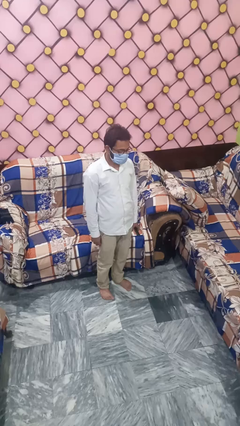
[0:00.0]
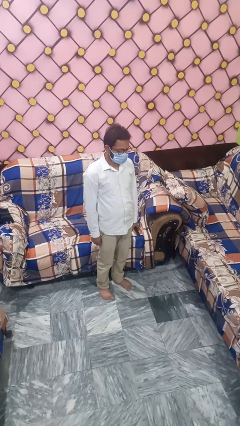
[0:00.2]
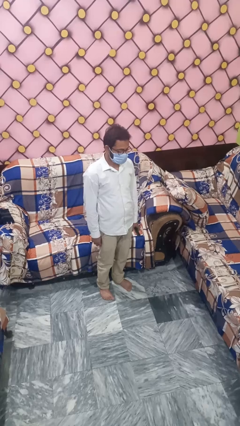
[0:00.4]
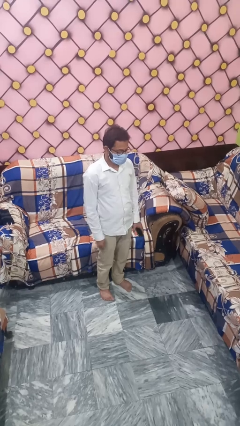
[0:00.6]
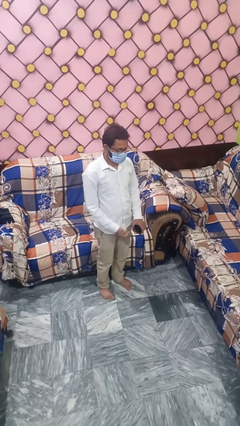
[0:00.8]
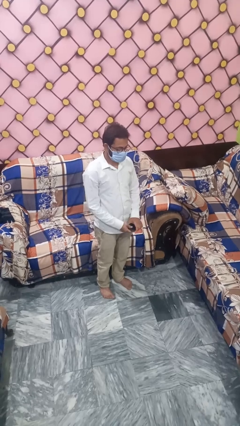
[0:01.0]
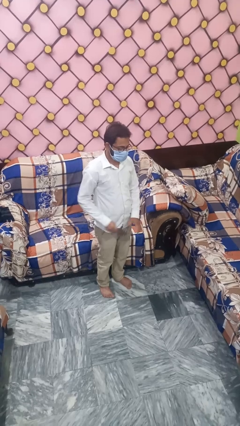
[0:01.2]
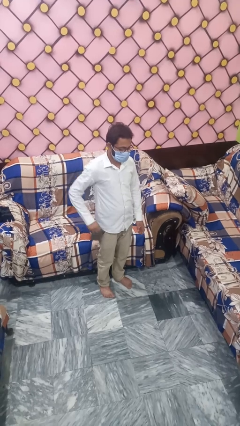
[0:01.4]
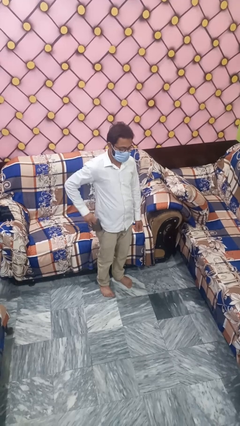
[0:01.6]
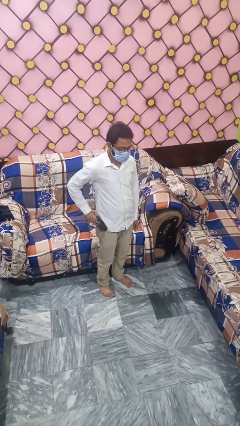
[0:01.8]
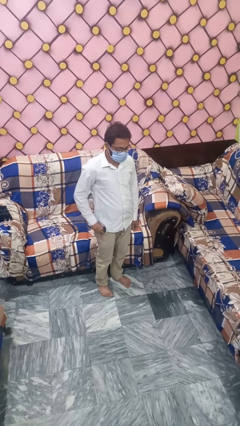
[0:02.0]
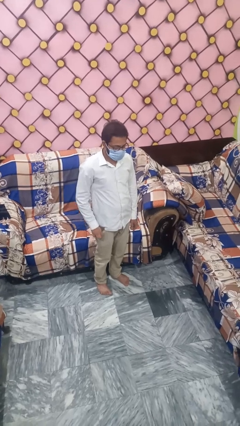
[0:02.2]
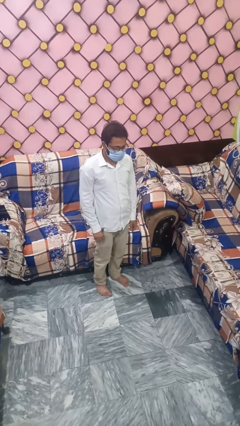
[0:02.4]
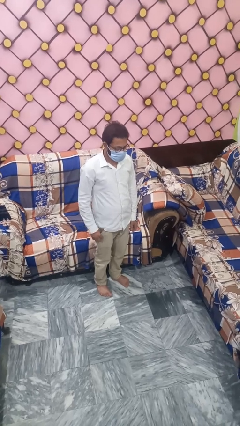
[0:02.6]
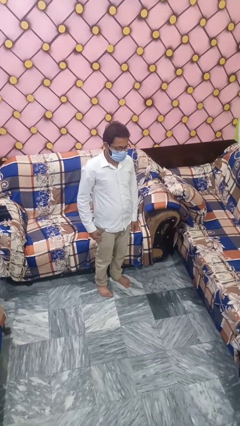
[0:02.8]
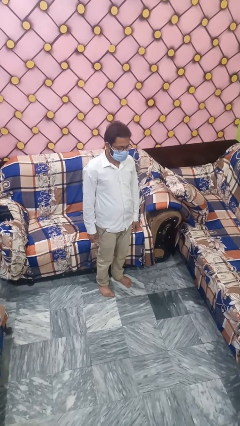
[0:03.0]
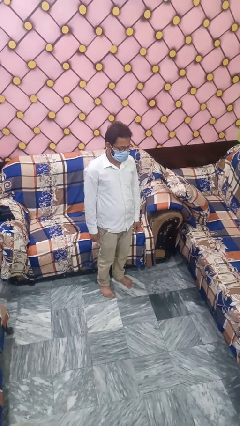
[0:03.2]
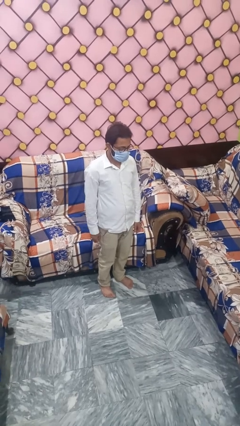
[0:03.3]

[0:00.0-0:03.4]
person takes phone from pocket

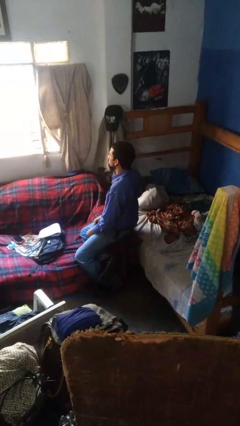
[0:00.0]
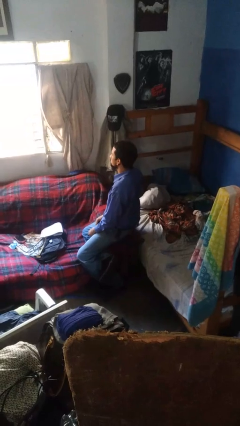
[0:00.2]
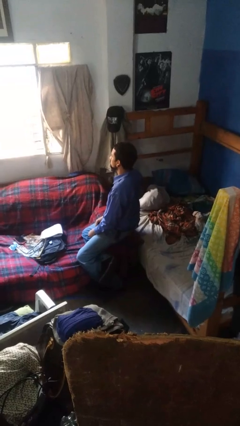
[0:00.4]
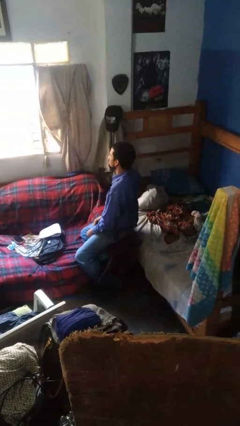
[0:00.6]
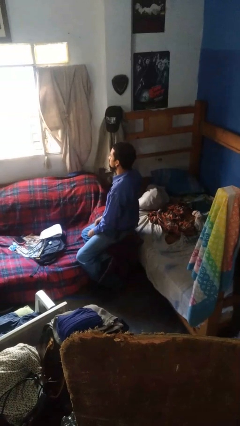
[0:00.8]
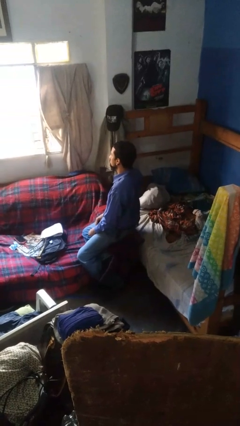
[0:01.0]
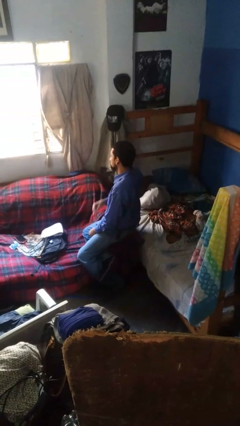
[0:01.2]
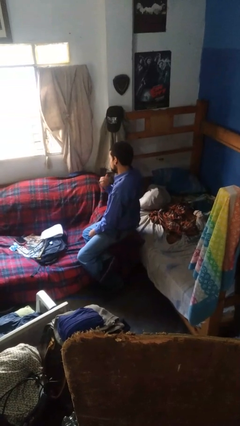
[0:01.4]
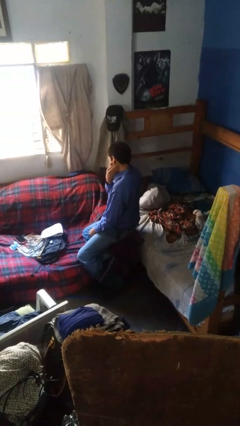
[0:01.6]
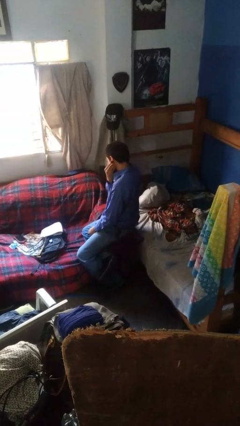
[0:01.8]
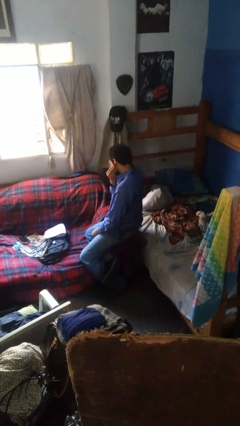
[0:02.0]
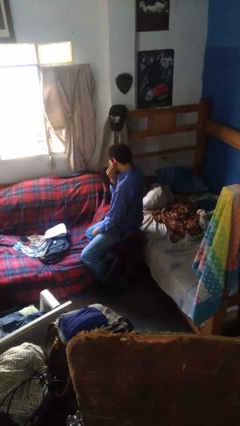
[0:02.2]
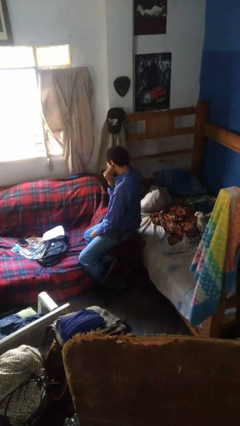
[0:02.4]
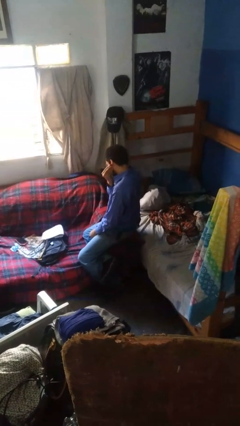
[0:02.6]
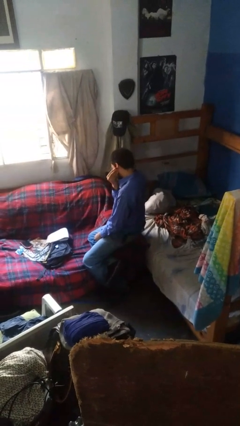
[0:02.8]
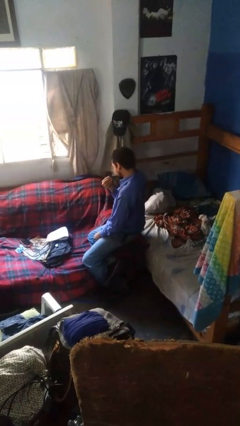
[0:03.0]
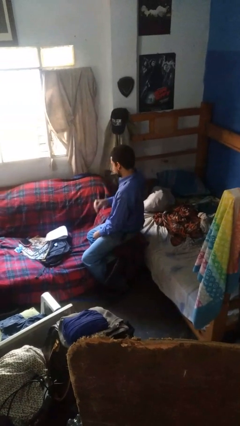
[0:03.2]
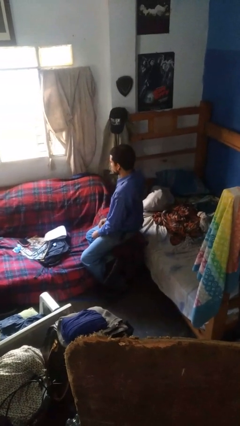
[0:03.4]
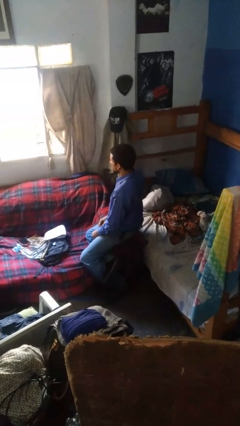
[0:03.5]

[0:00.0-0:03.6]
person touches earlobe

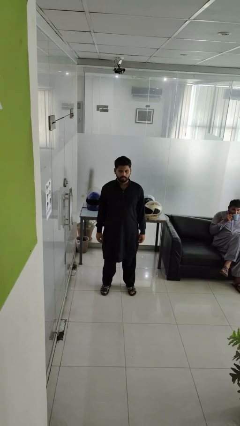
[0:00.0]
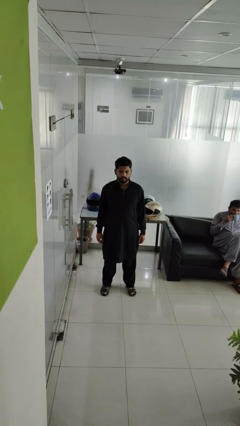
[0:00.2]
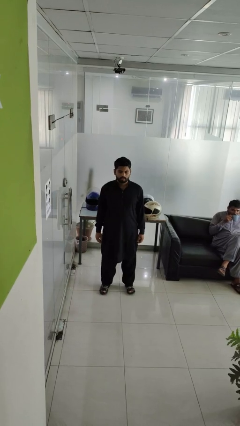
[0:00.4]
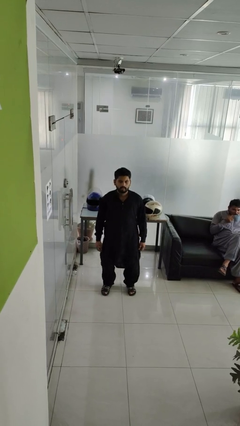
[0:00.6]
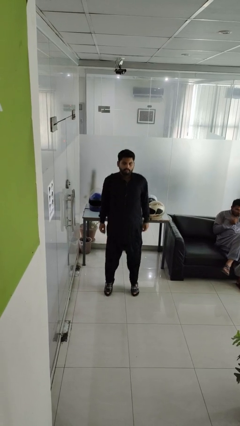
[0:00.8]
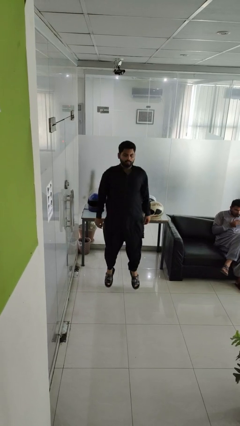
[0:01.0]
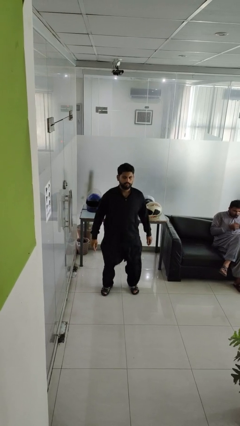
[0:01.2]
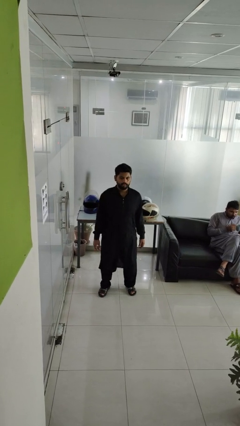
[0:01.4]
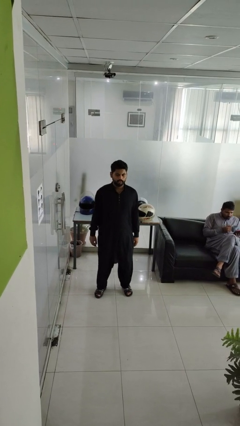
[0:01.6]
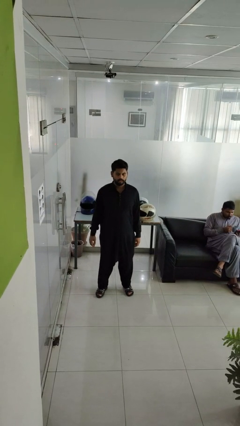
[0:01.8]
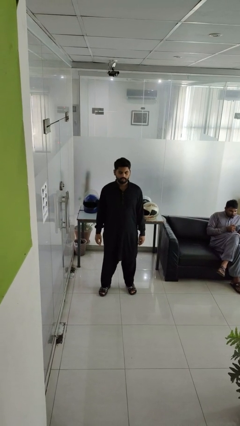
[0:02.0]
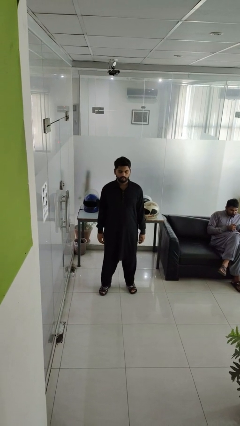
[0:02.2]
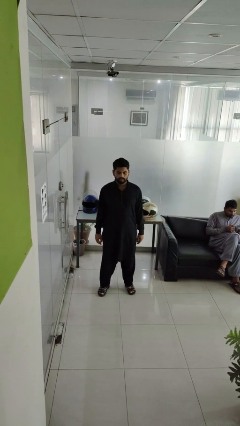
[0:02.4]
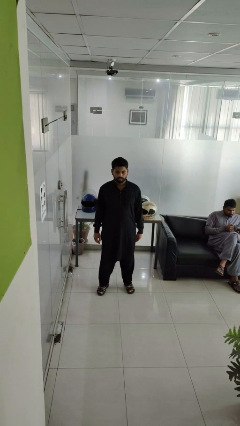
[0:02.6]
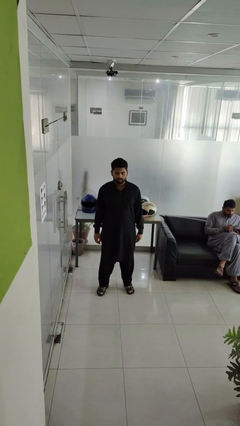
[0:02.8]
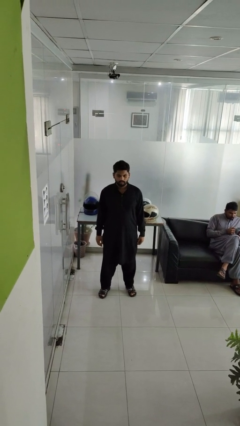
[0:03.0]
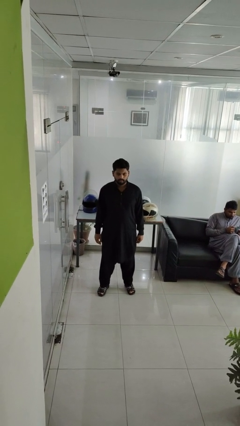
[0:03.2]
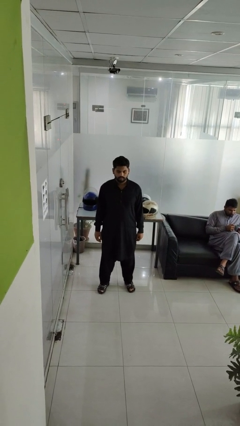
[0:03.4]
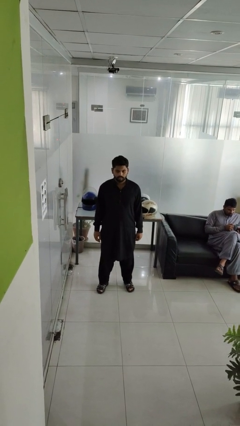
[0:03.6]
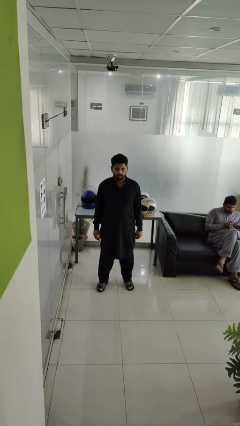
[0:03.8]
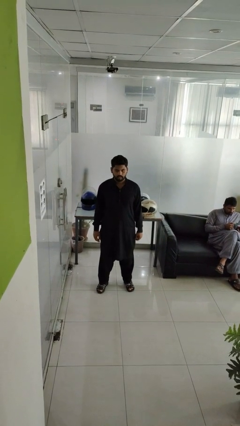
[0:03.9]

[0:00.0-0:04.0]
person jumps

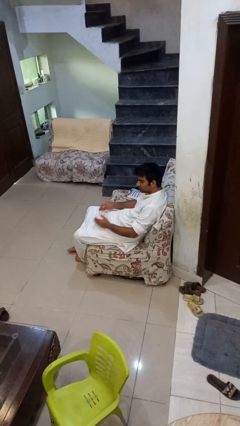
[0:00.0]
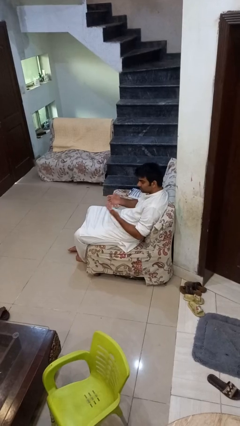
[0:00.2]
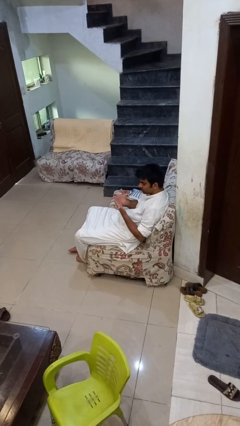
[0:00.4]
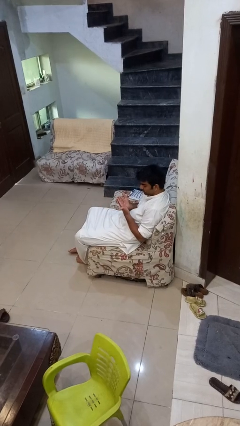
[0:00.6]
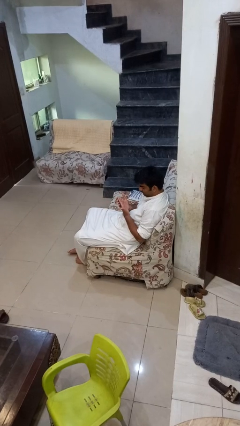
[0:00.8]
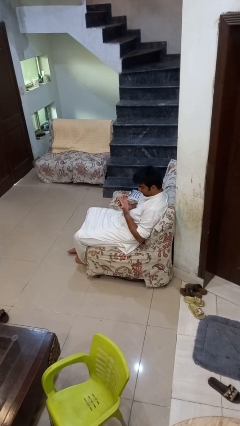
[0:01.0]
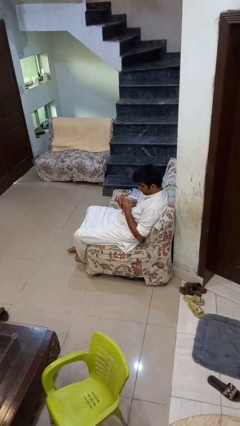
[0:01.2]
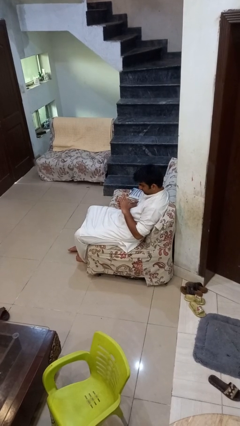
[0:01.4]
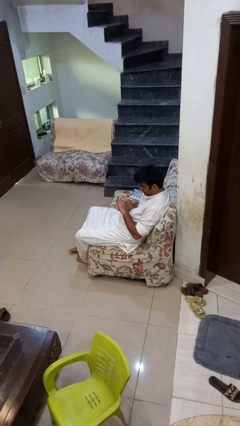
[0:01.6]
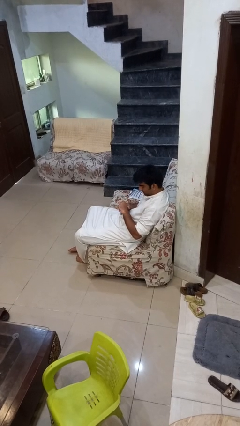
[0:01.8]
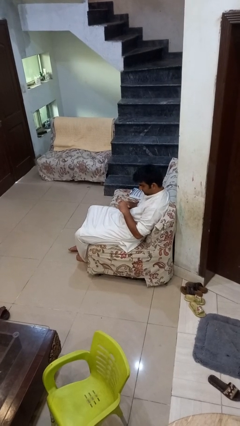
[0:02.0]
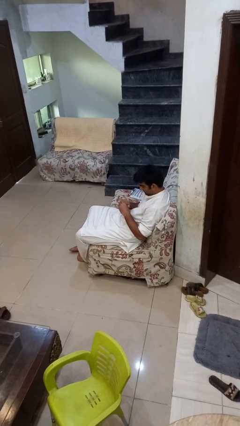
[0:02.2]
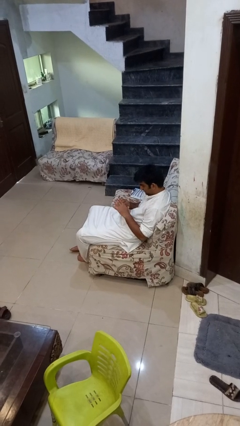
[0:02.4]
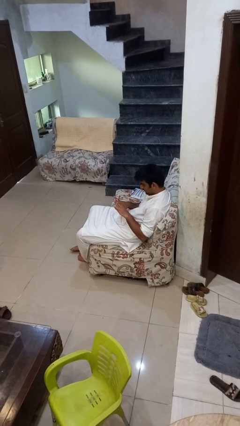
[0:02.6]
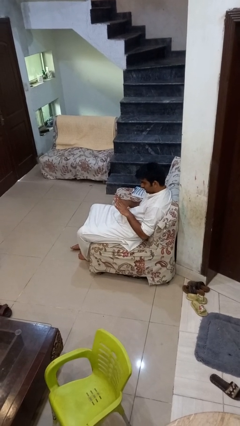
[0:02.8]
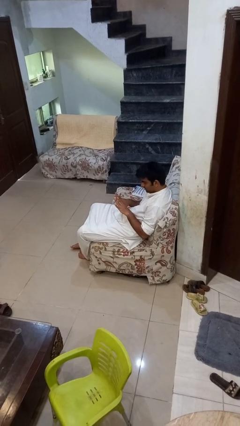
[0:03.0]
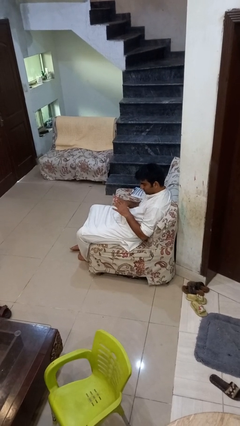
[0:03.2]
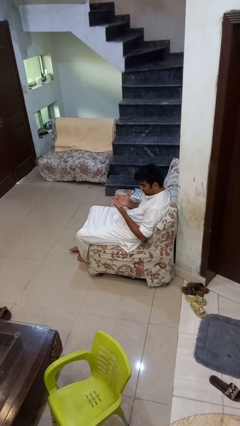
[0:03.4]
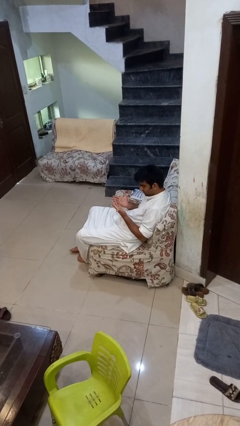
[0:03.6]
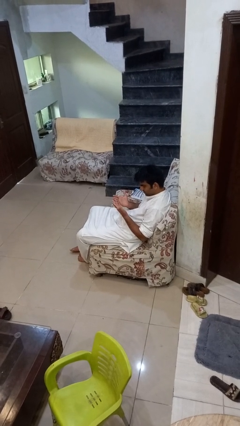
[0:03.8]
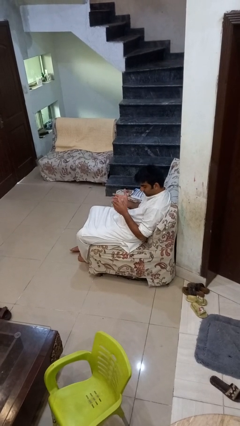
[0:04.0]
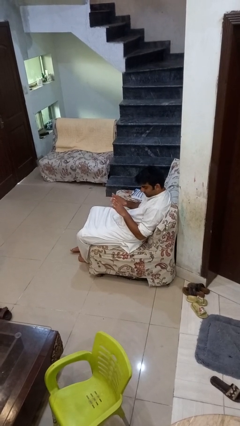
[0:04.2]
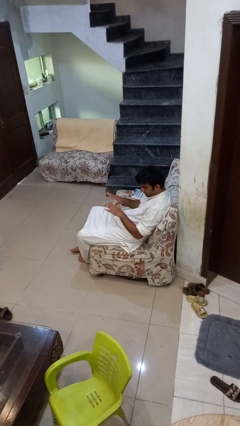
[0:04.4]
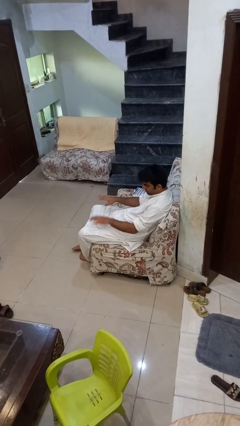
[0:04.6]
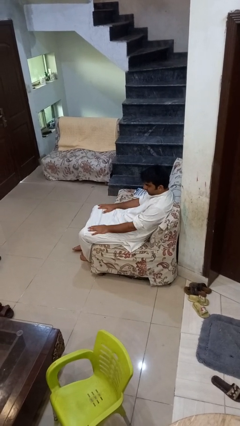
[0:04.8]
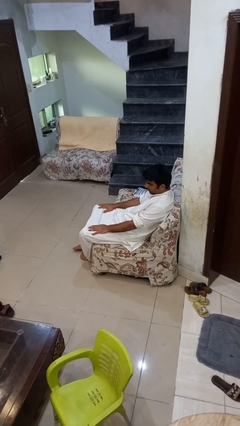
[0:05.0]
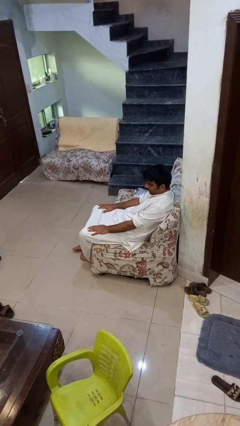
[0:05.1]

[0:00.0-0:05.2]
person looks at hands in lap

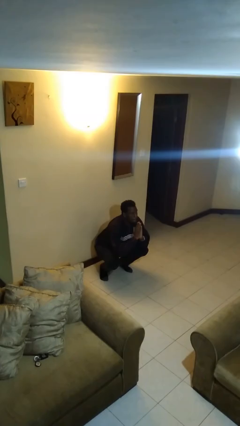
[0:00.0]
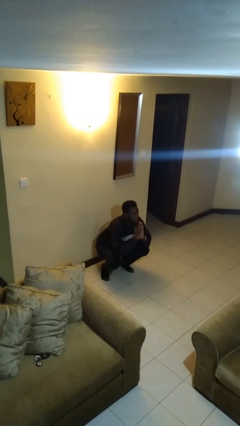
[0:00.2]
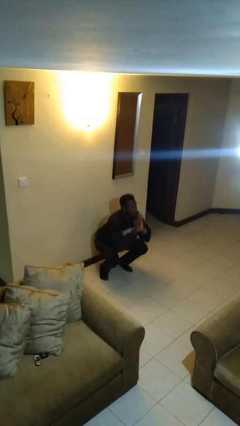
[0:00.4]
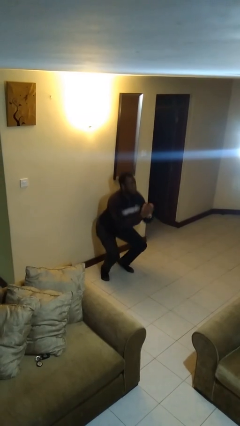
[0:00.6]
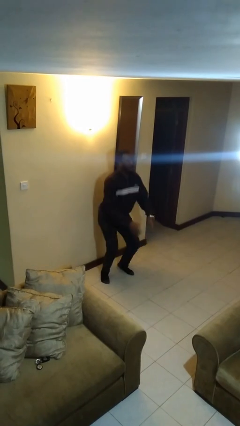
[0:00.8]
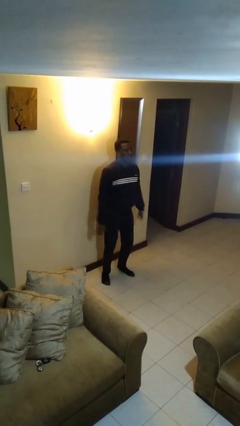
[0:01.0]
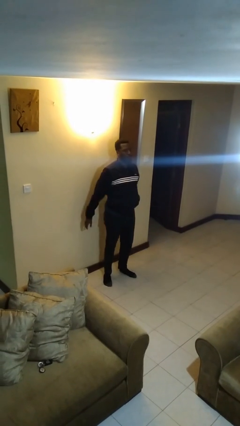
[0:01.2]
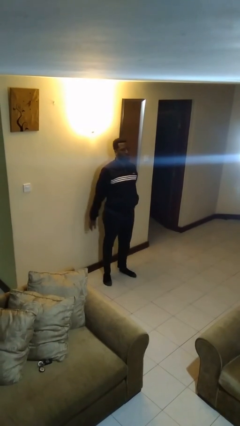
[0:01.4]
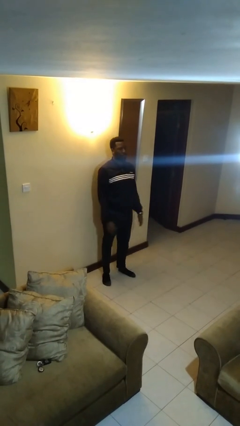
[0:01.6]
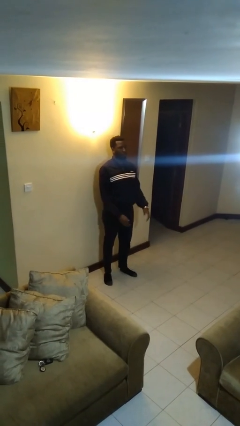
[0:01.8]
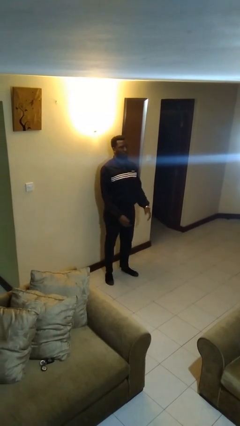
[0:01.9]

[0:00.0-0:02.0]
person stands up
